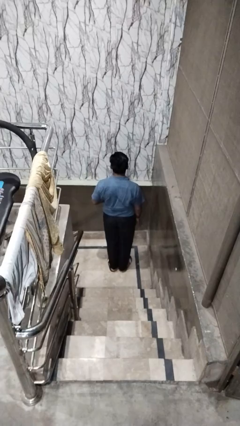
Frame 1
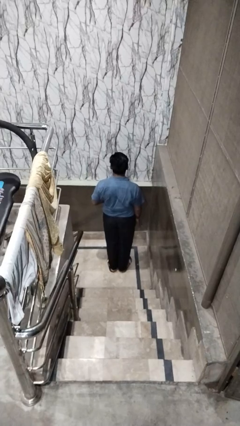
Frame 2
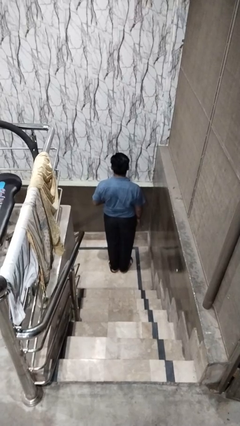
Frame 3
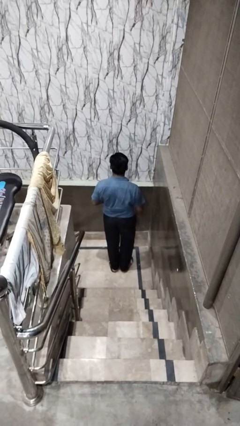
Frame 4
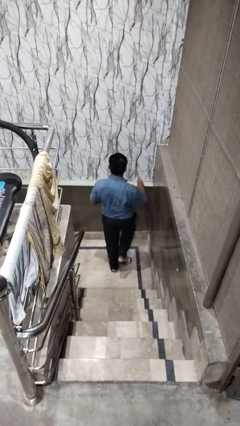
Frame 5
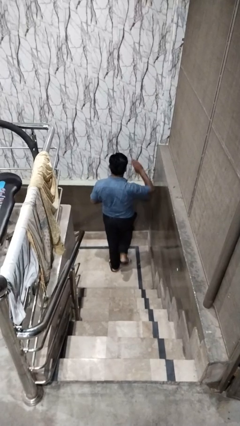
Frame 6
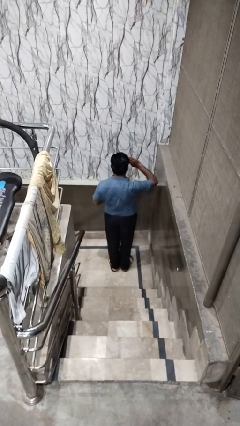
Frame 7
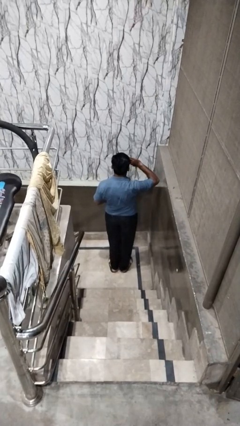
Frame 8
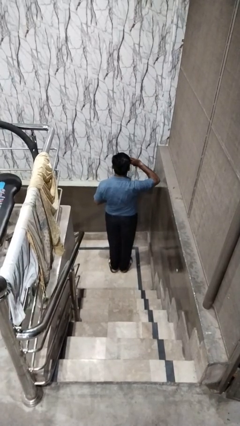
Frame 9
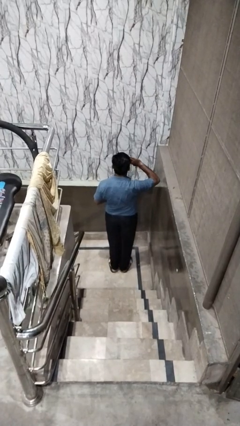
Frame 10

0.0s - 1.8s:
person salutes

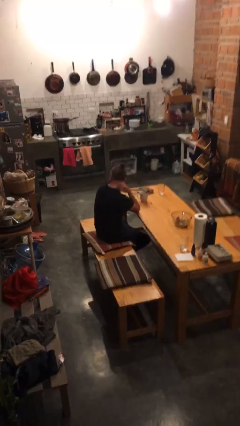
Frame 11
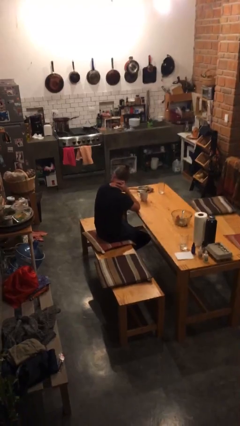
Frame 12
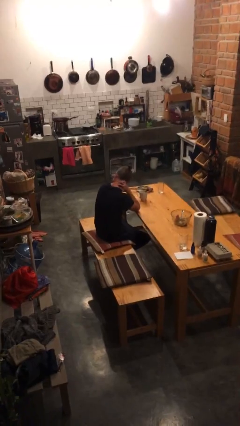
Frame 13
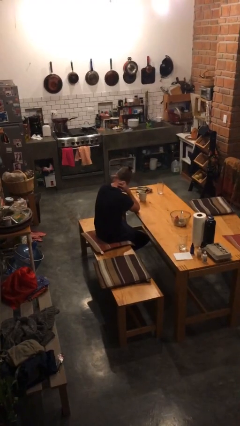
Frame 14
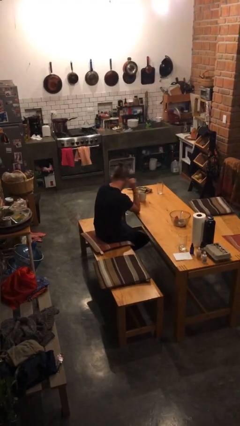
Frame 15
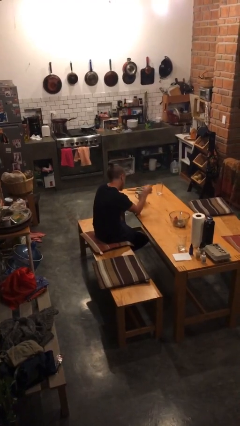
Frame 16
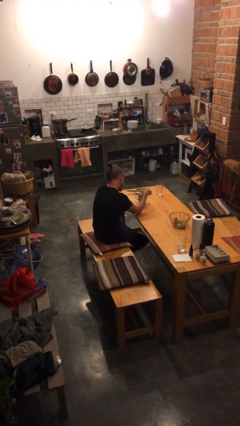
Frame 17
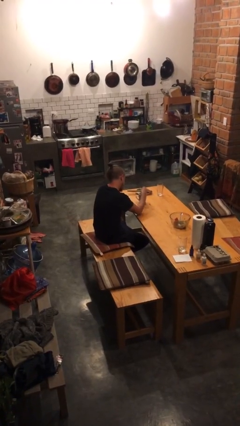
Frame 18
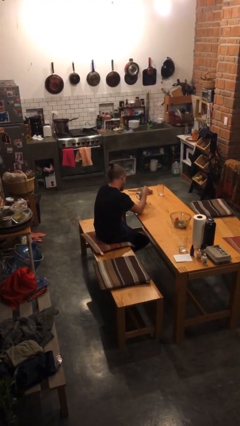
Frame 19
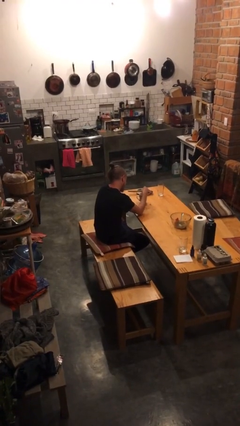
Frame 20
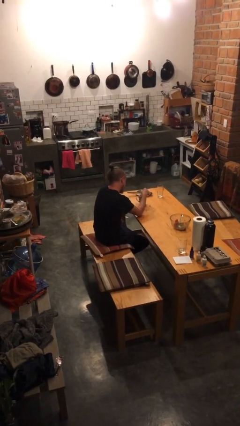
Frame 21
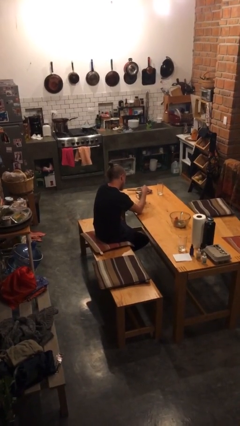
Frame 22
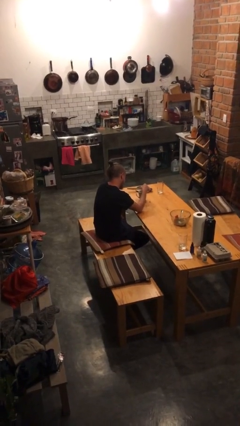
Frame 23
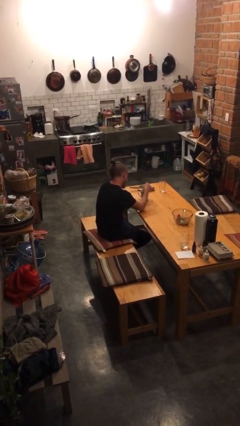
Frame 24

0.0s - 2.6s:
person stirs mug

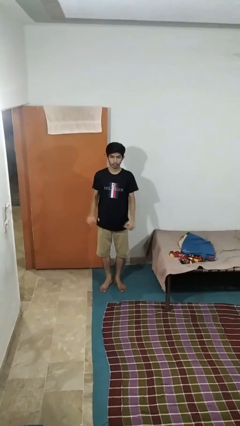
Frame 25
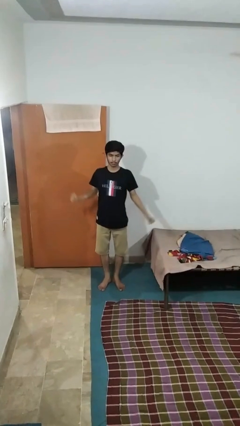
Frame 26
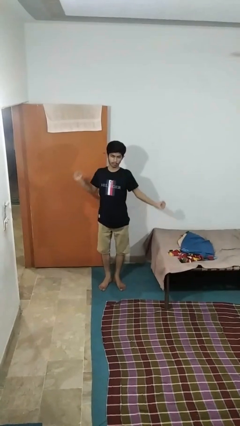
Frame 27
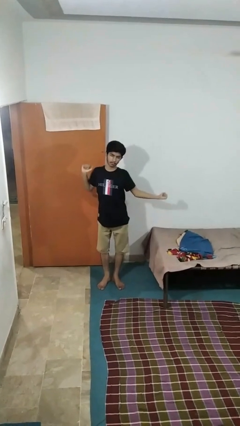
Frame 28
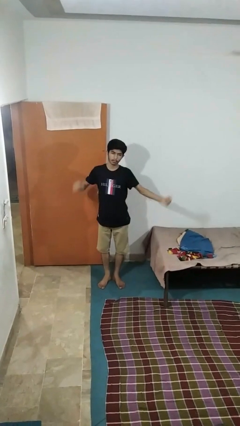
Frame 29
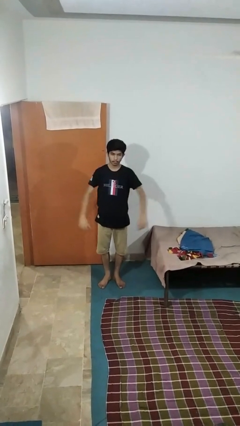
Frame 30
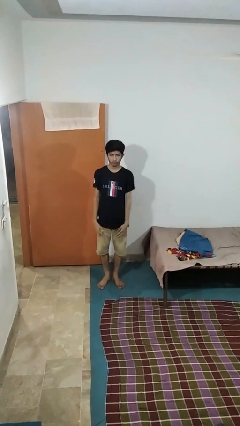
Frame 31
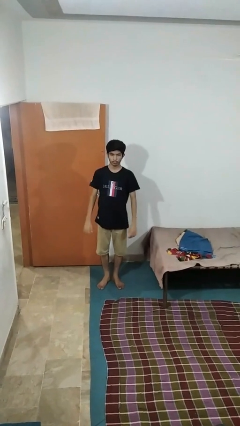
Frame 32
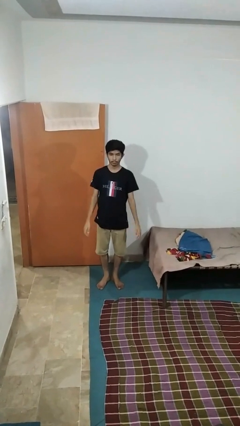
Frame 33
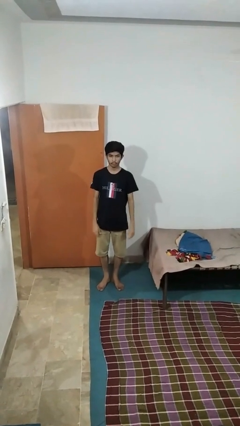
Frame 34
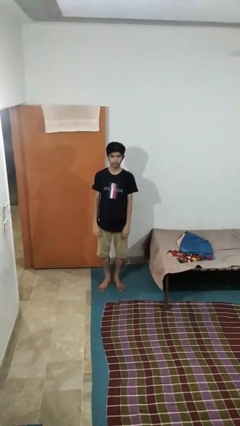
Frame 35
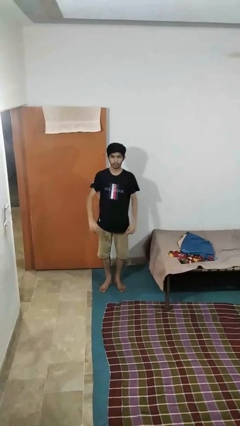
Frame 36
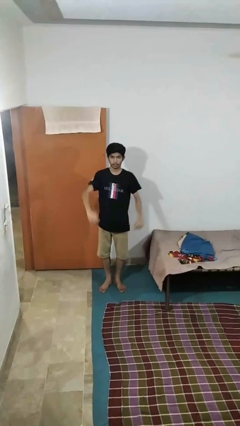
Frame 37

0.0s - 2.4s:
person stretches arms to side

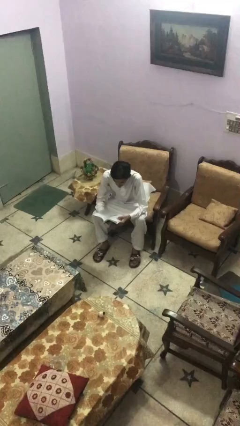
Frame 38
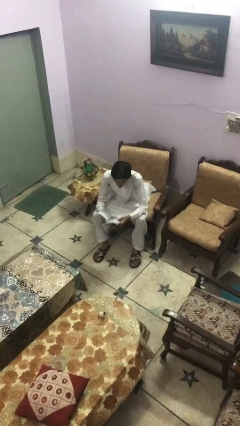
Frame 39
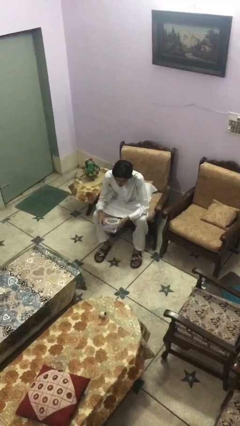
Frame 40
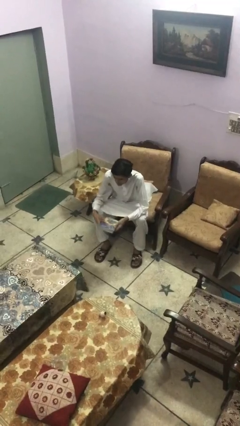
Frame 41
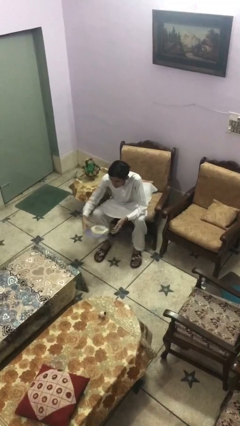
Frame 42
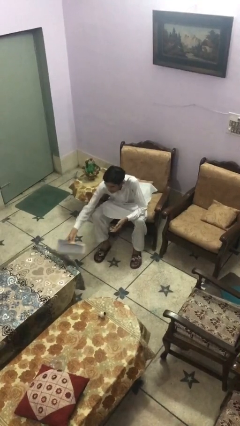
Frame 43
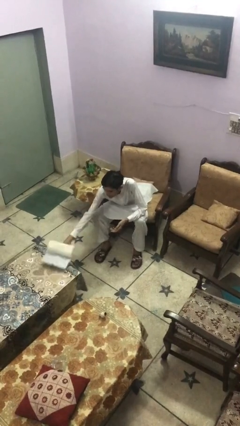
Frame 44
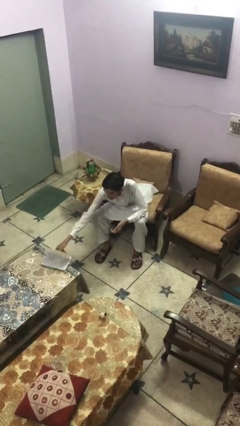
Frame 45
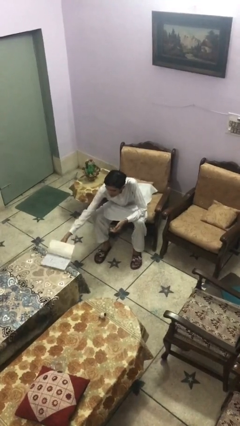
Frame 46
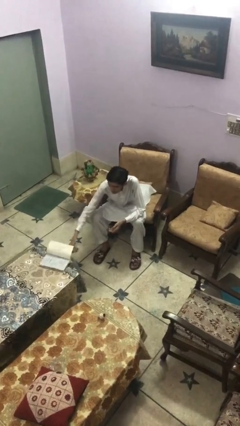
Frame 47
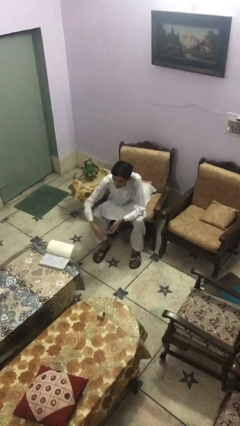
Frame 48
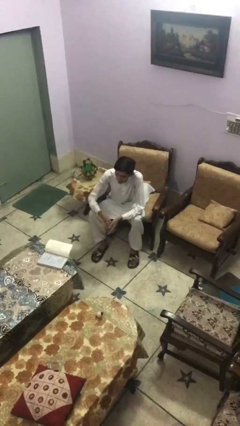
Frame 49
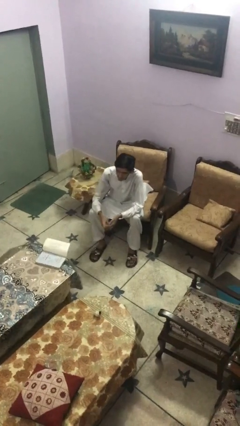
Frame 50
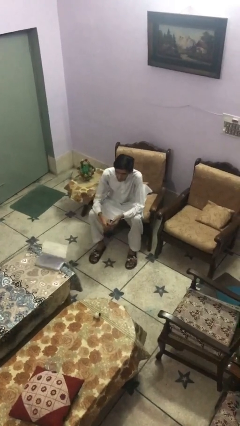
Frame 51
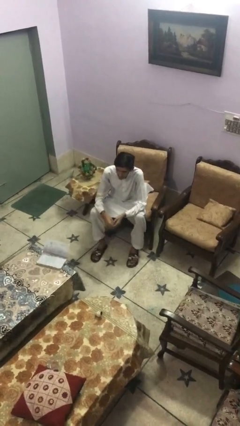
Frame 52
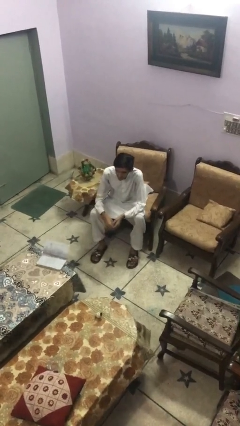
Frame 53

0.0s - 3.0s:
person puts down object on table

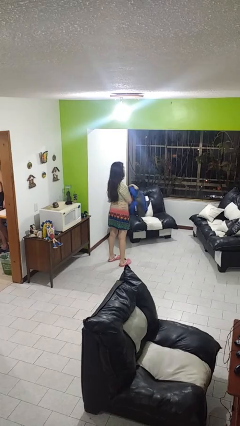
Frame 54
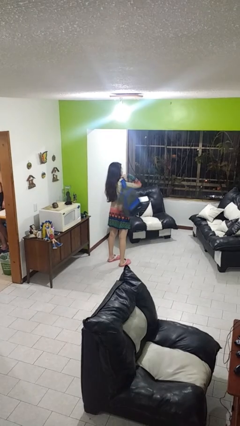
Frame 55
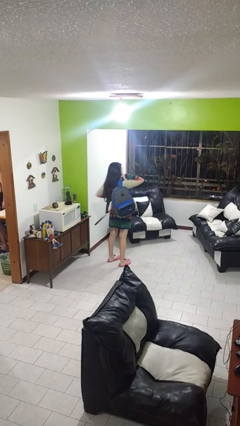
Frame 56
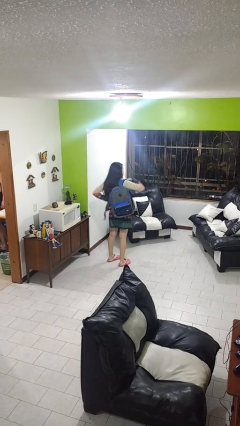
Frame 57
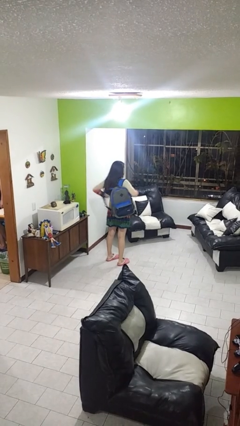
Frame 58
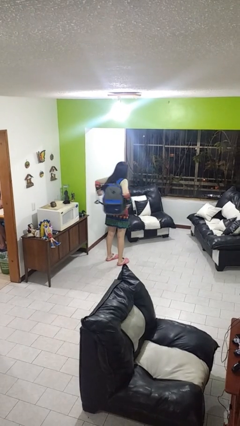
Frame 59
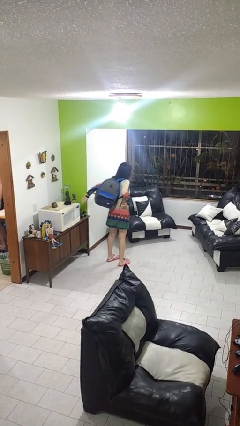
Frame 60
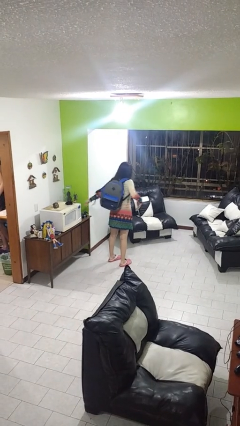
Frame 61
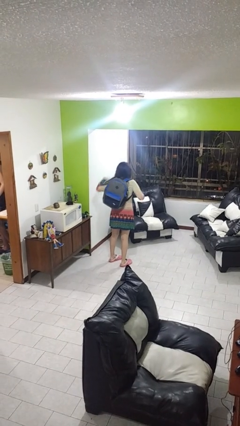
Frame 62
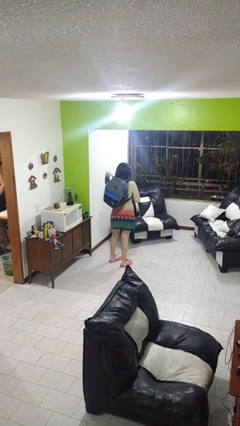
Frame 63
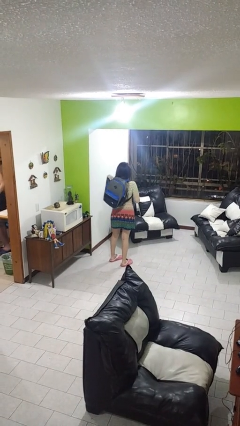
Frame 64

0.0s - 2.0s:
person puts on backpack

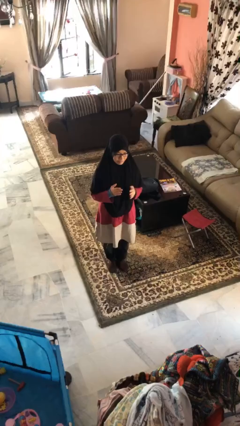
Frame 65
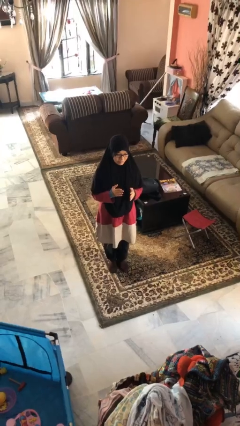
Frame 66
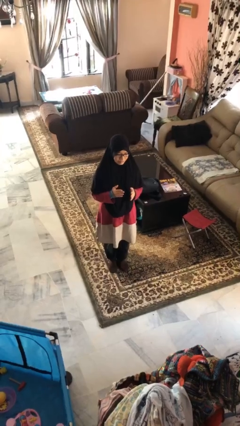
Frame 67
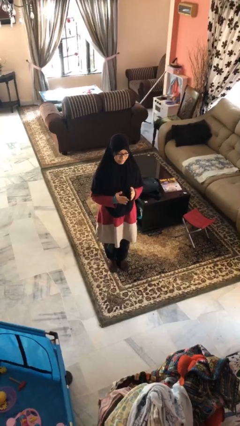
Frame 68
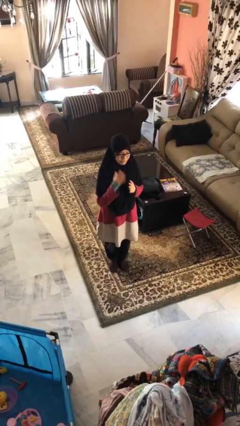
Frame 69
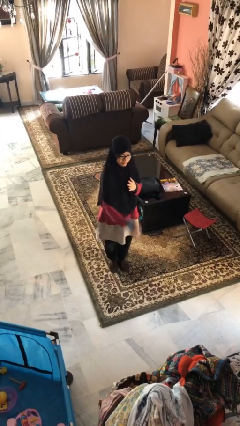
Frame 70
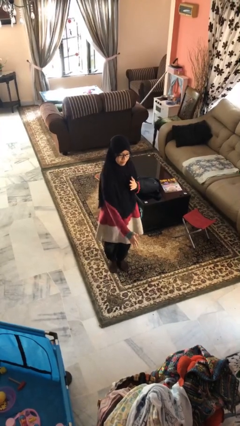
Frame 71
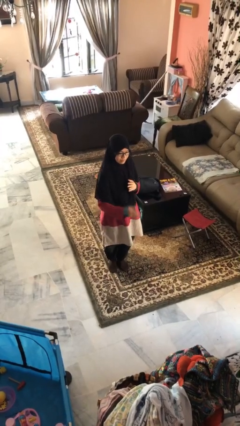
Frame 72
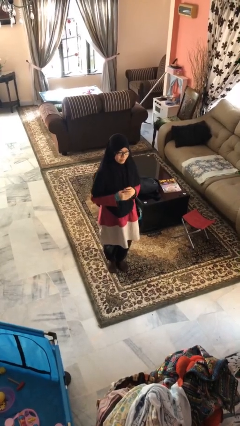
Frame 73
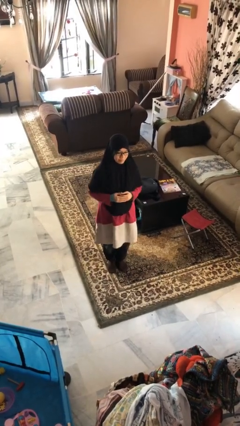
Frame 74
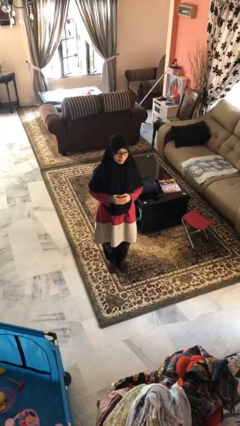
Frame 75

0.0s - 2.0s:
person karate chop

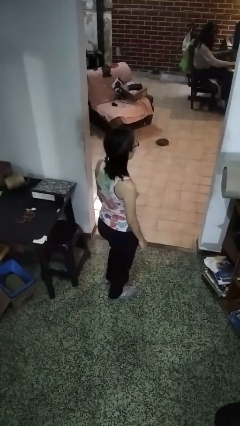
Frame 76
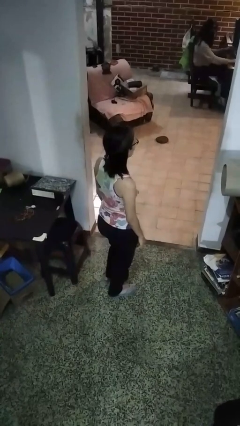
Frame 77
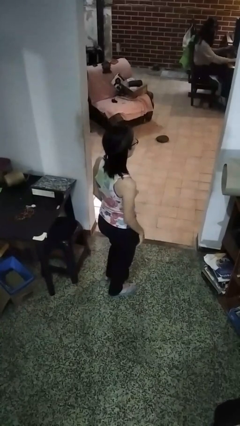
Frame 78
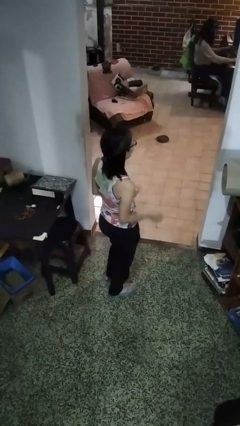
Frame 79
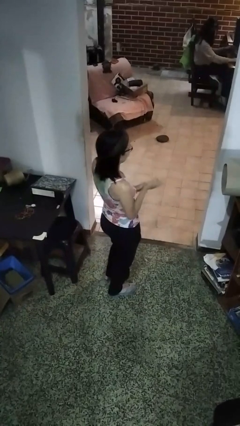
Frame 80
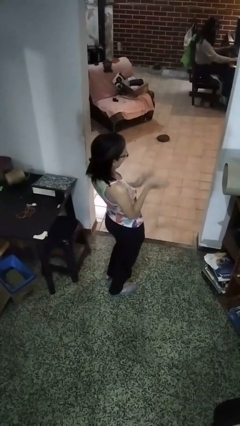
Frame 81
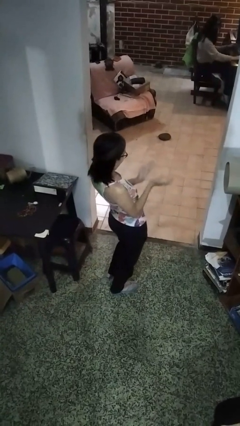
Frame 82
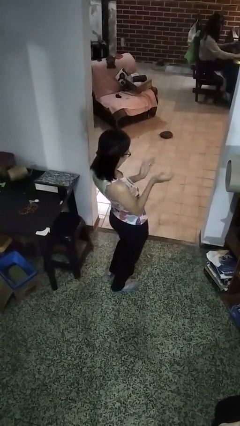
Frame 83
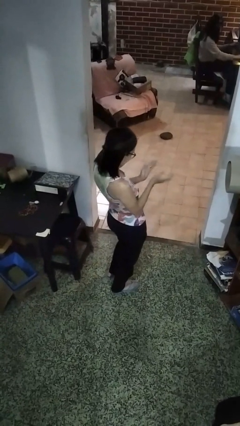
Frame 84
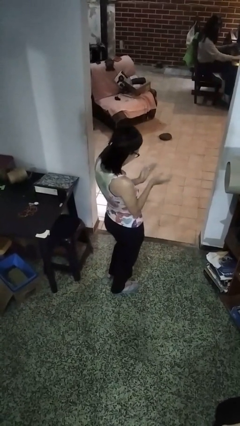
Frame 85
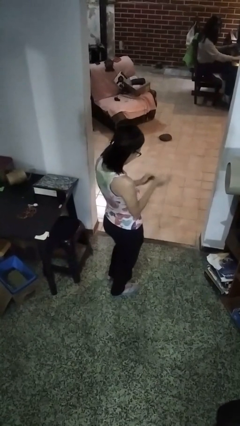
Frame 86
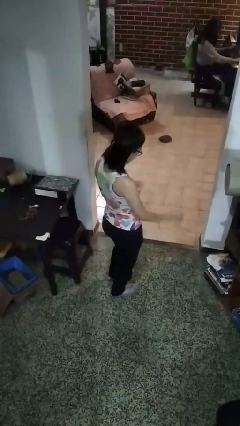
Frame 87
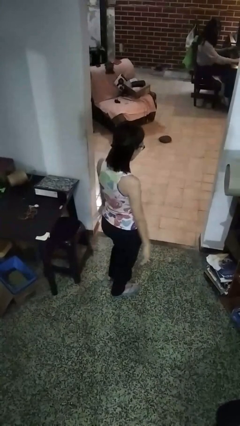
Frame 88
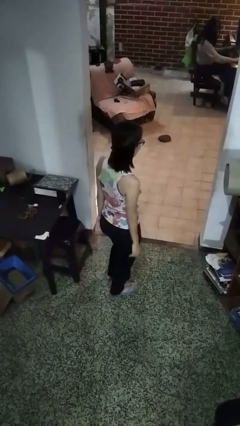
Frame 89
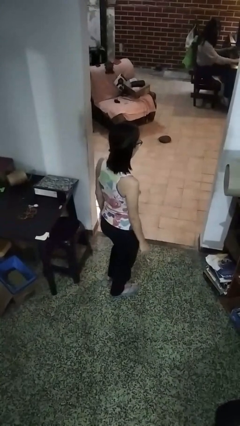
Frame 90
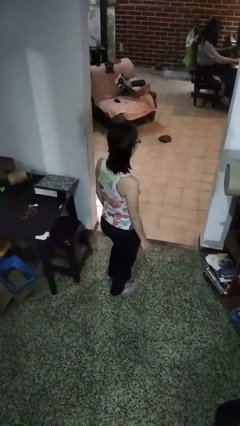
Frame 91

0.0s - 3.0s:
person claps hands

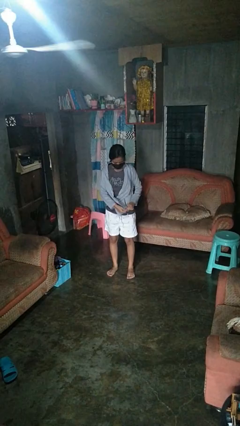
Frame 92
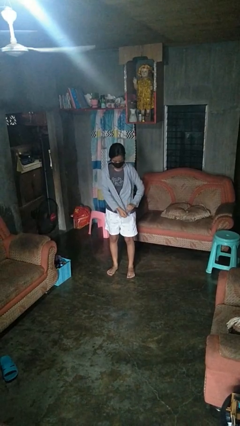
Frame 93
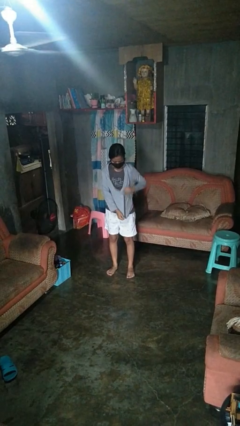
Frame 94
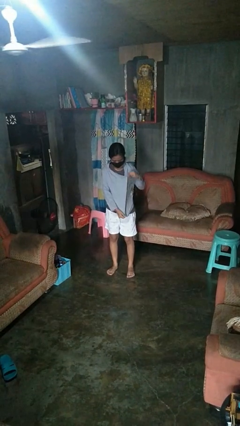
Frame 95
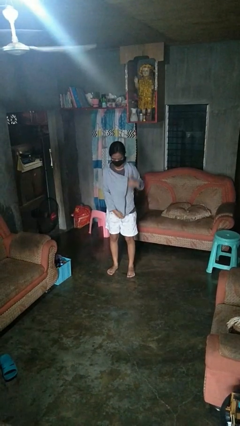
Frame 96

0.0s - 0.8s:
person zips up jacket
